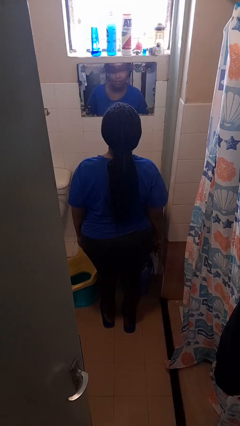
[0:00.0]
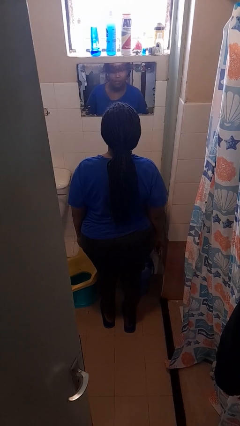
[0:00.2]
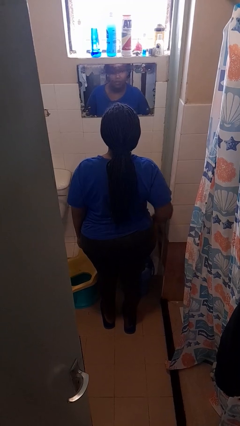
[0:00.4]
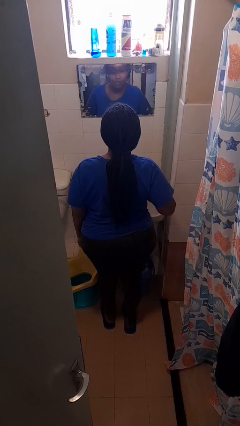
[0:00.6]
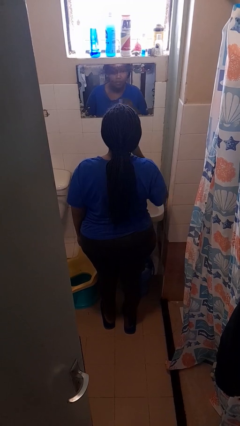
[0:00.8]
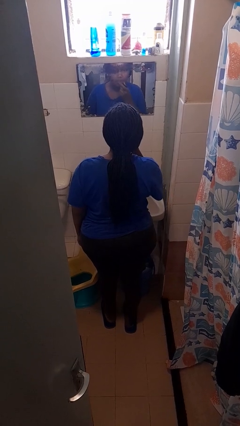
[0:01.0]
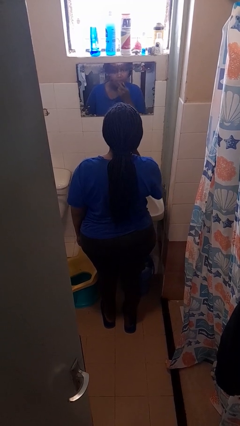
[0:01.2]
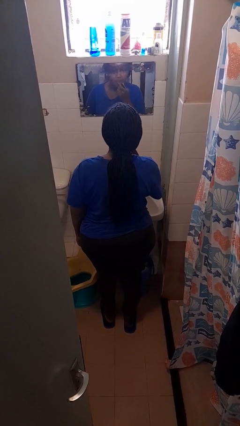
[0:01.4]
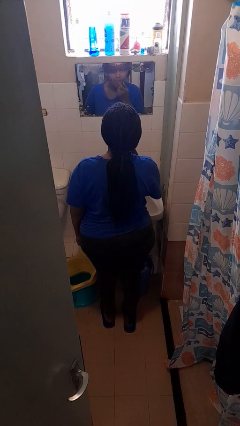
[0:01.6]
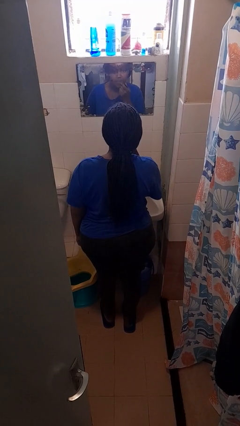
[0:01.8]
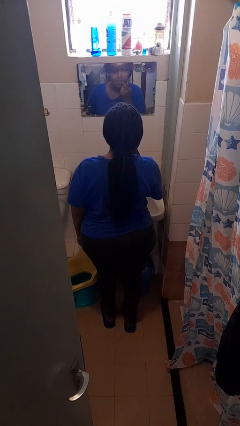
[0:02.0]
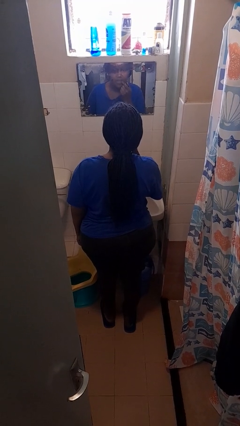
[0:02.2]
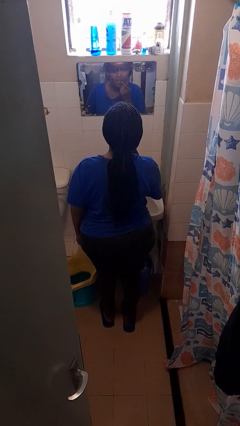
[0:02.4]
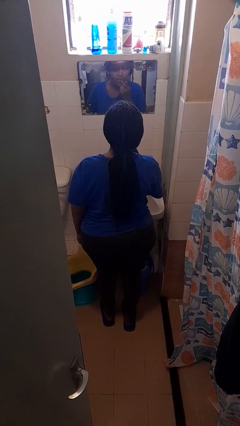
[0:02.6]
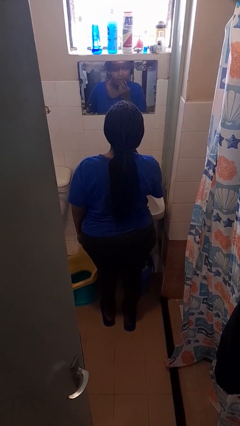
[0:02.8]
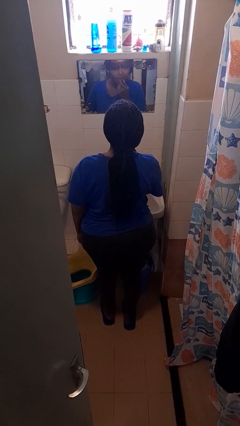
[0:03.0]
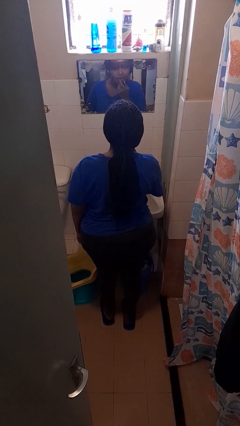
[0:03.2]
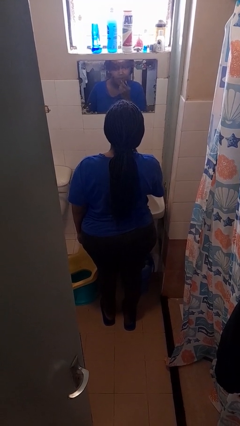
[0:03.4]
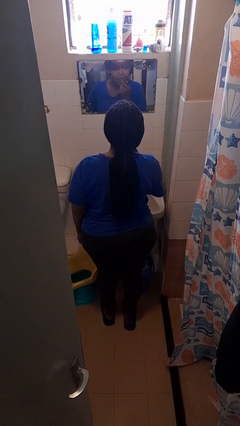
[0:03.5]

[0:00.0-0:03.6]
person applies lip makeup

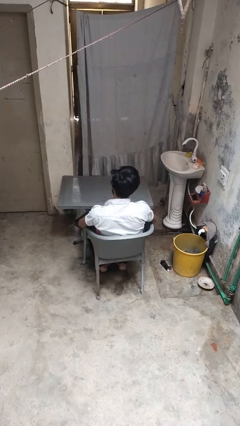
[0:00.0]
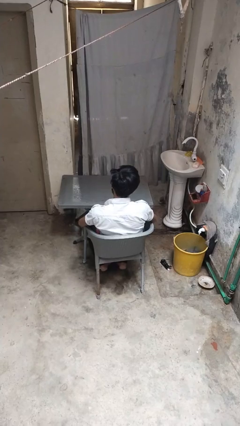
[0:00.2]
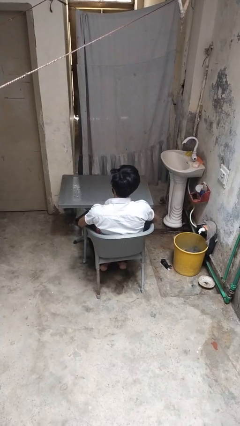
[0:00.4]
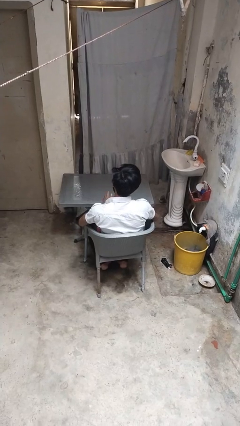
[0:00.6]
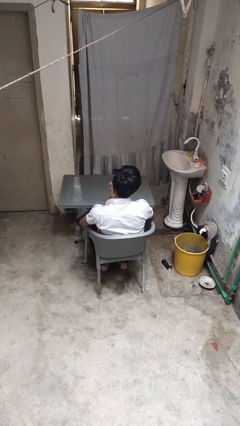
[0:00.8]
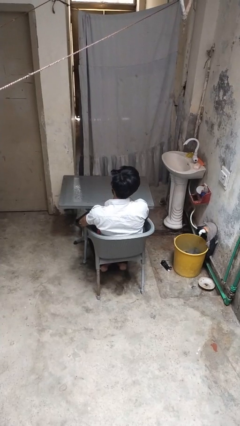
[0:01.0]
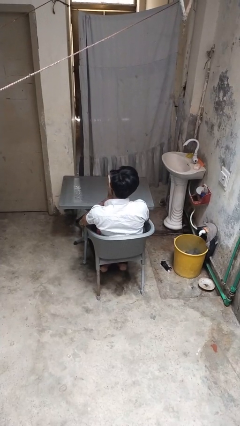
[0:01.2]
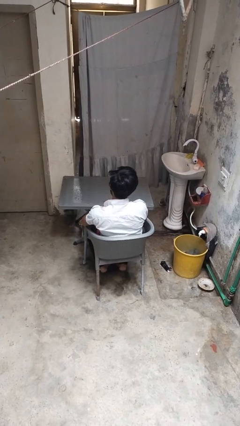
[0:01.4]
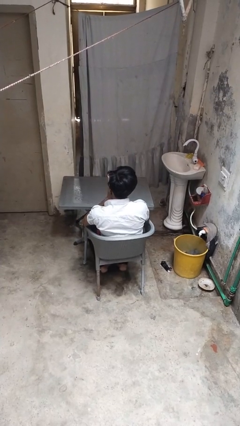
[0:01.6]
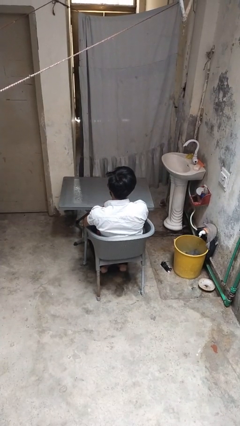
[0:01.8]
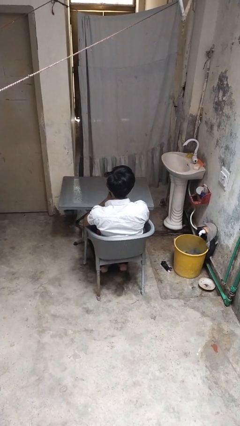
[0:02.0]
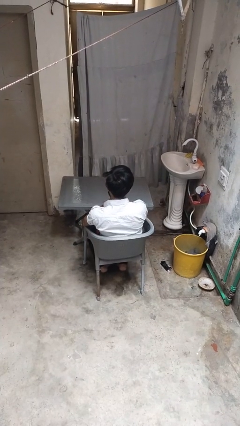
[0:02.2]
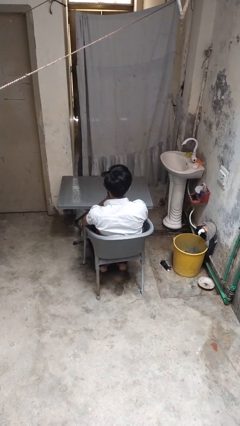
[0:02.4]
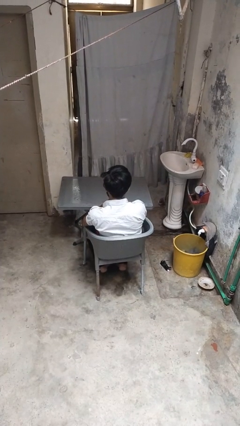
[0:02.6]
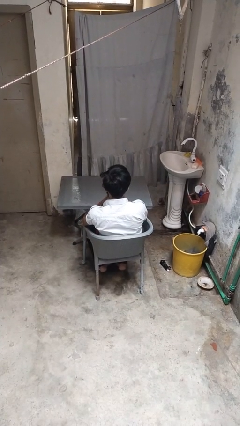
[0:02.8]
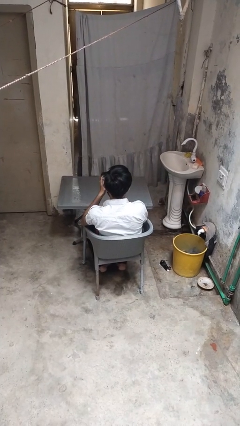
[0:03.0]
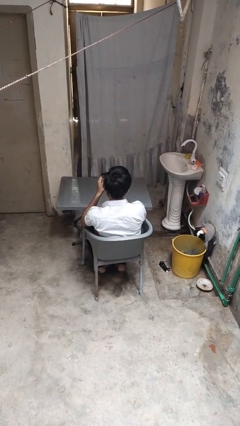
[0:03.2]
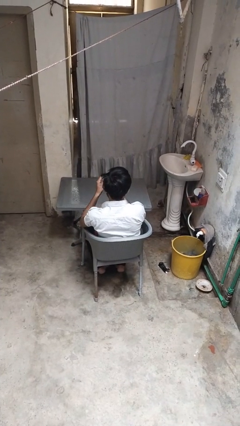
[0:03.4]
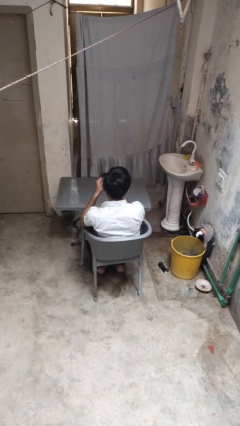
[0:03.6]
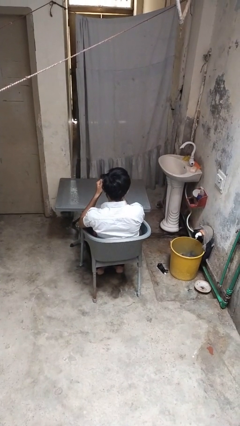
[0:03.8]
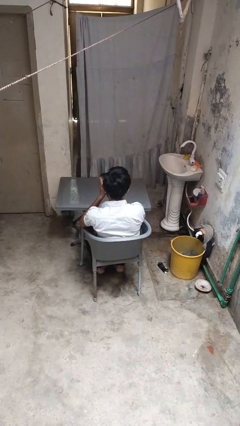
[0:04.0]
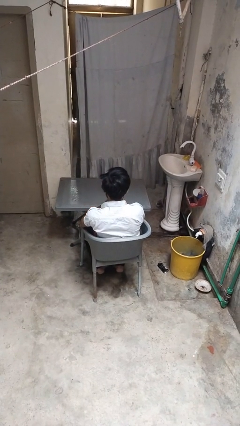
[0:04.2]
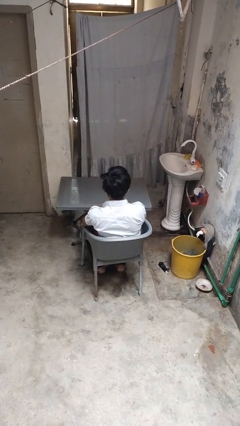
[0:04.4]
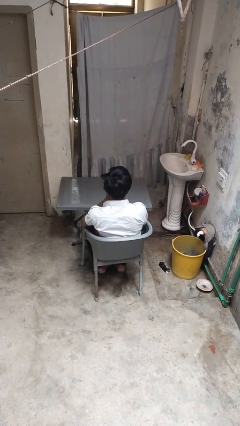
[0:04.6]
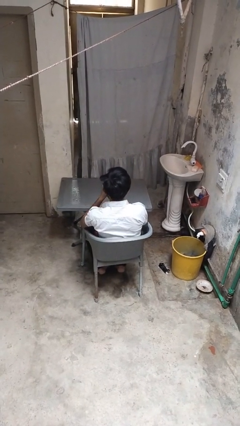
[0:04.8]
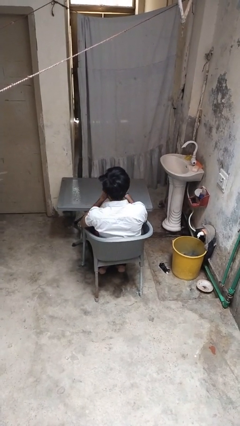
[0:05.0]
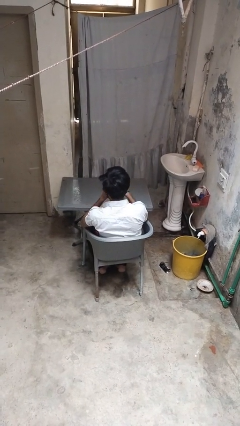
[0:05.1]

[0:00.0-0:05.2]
person blows into hands

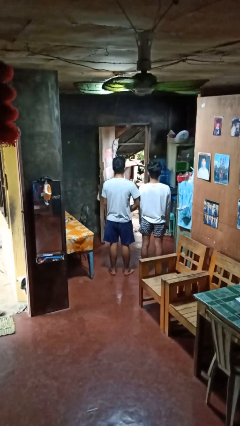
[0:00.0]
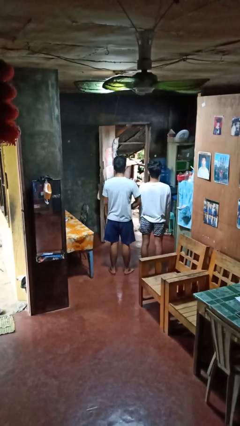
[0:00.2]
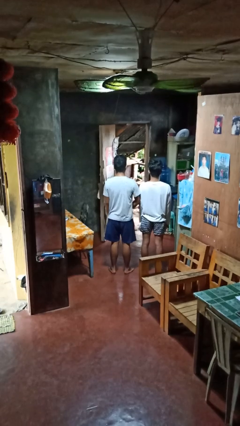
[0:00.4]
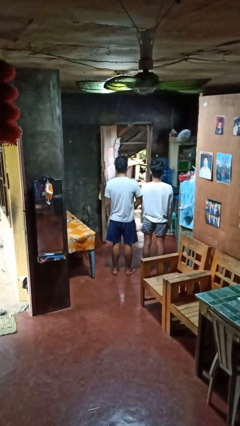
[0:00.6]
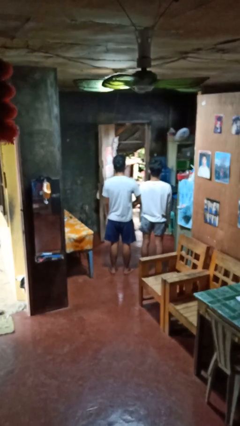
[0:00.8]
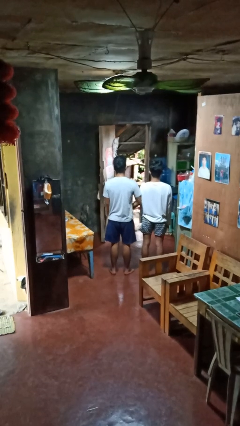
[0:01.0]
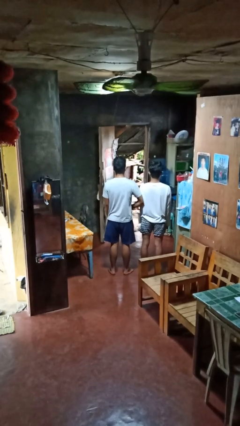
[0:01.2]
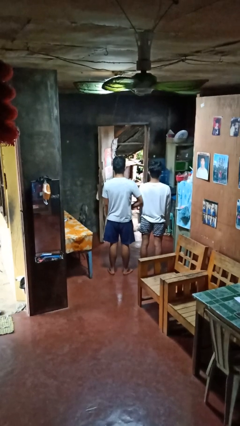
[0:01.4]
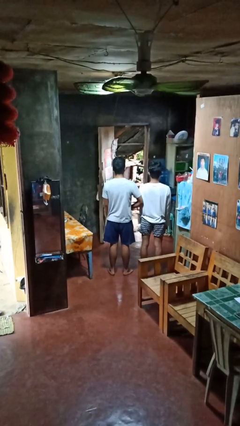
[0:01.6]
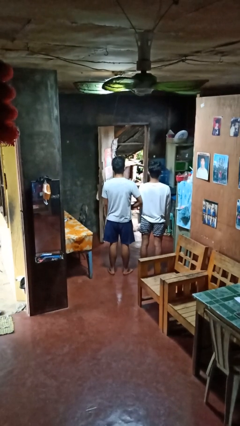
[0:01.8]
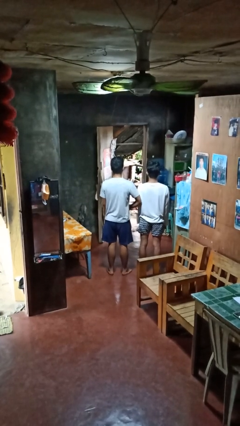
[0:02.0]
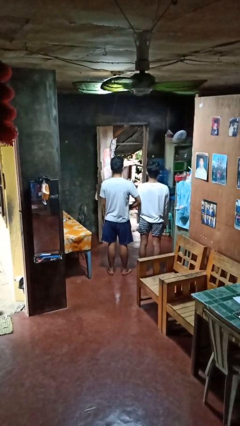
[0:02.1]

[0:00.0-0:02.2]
person nudges person with elbow

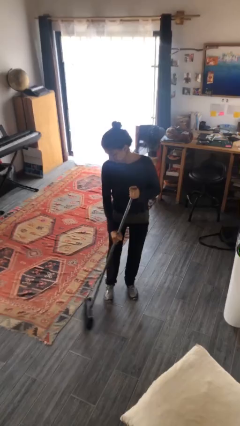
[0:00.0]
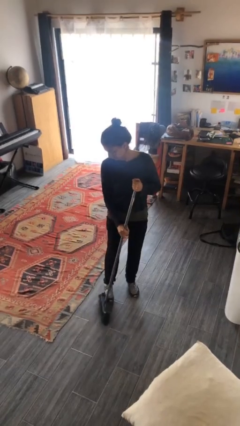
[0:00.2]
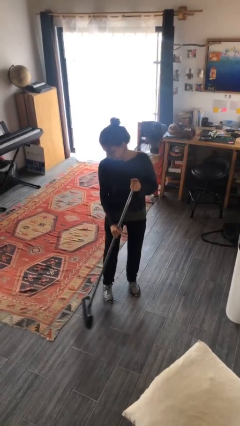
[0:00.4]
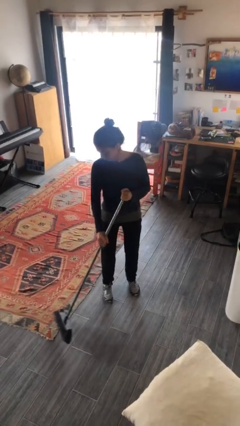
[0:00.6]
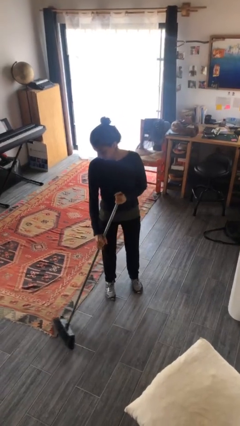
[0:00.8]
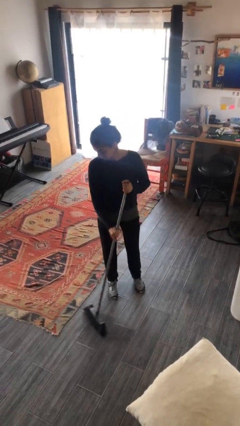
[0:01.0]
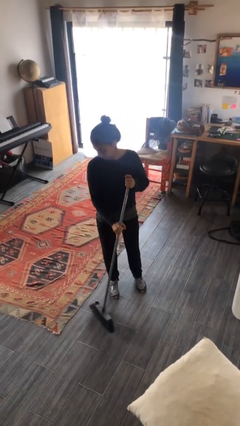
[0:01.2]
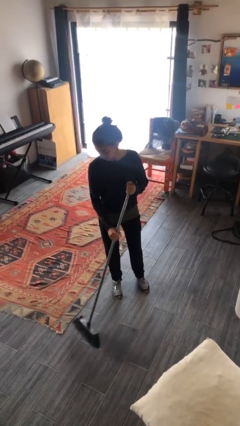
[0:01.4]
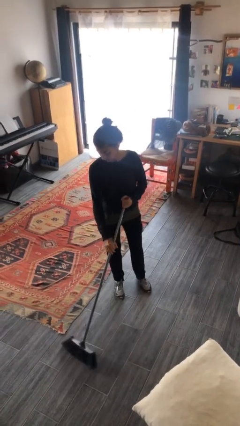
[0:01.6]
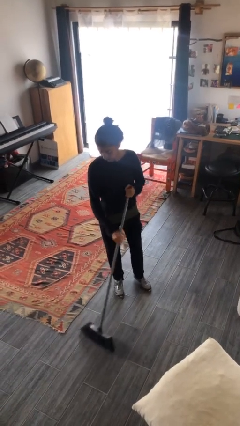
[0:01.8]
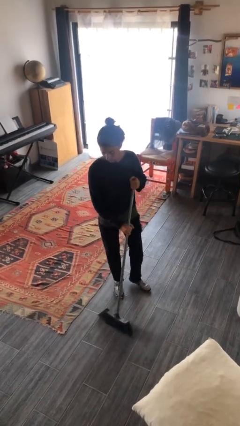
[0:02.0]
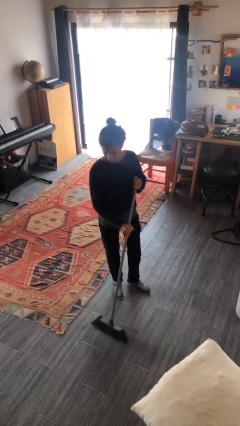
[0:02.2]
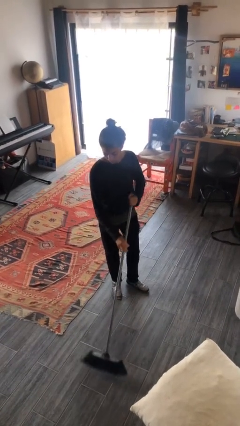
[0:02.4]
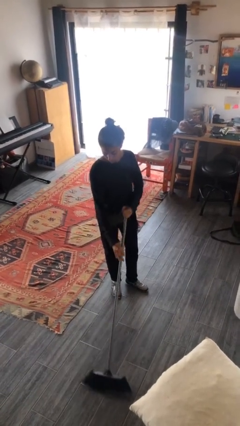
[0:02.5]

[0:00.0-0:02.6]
person sweeps floor

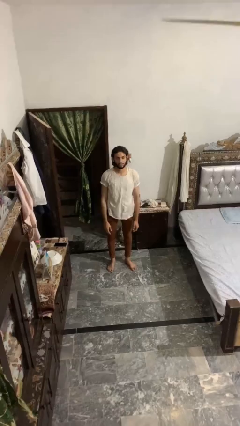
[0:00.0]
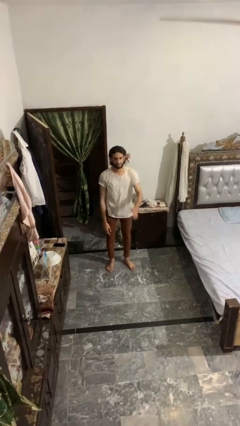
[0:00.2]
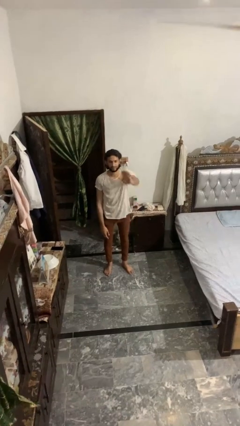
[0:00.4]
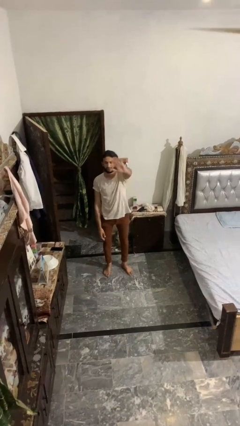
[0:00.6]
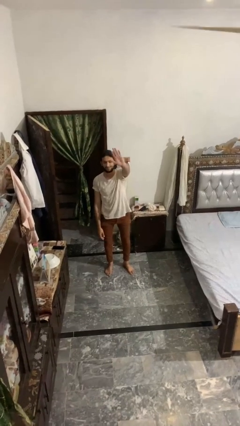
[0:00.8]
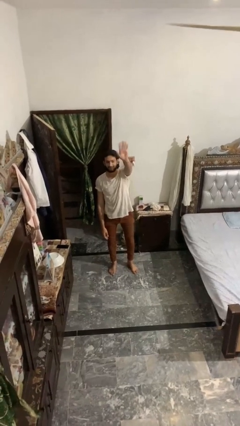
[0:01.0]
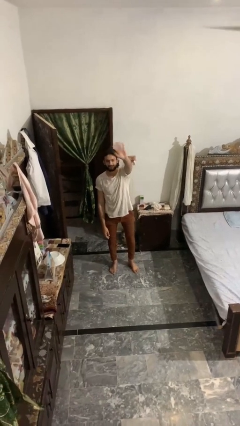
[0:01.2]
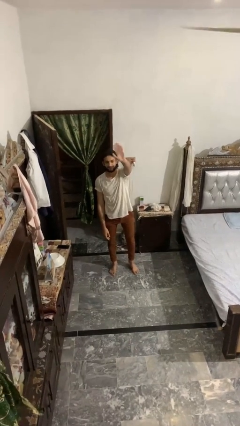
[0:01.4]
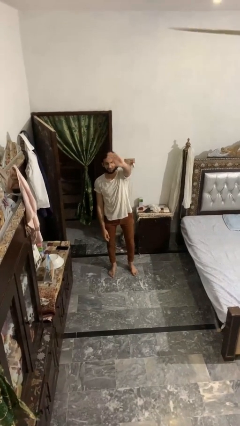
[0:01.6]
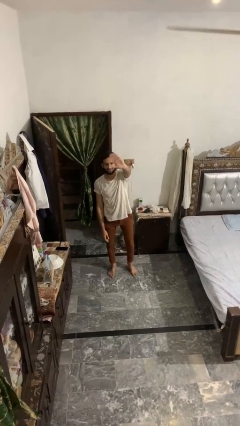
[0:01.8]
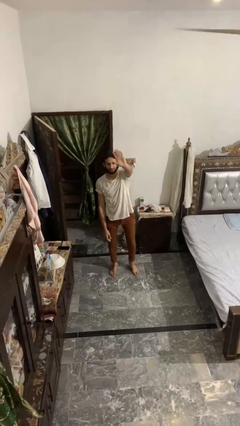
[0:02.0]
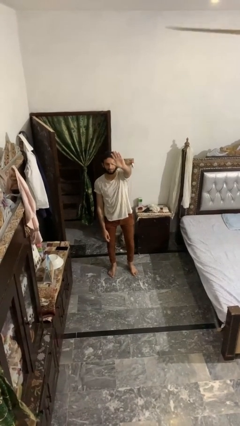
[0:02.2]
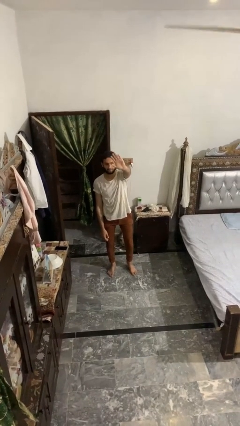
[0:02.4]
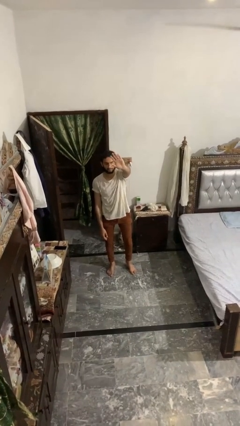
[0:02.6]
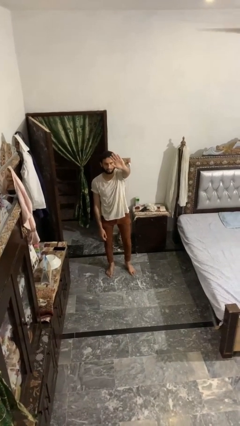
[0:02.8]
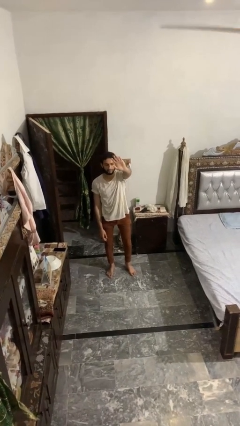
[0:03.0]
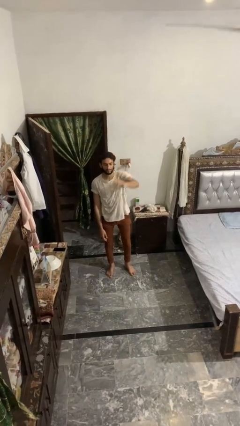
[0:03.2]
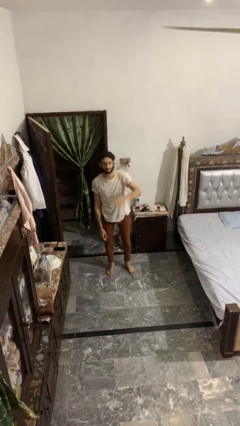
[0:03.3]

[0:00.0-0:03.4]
person waves at person

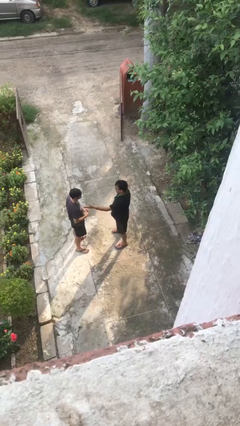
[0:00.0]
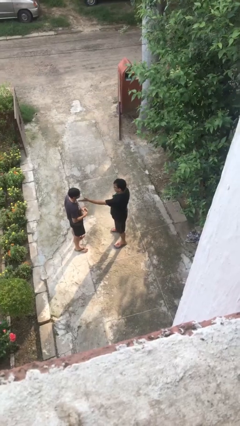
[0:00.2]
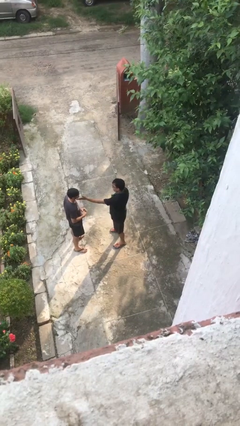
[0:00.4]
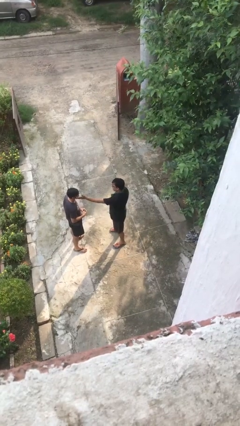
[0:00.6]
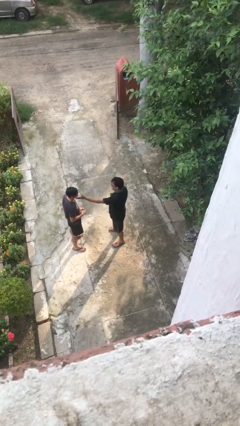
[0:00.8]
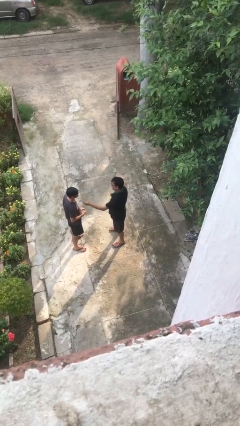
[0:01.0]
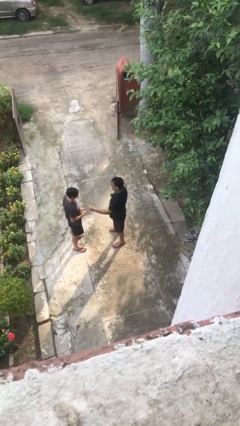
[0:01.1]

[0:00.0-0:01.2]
person touches face of person
